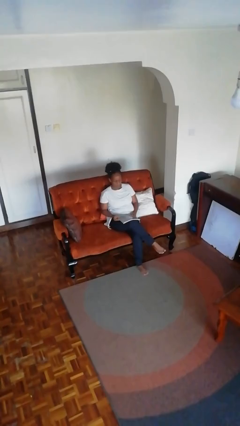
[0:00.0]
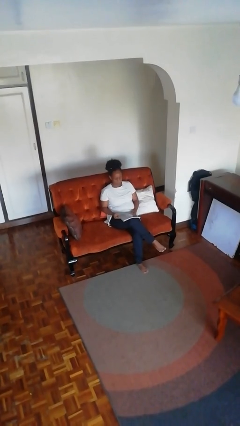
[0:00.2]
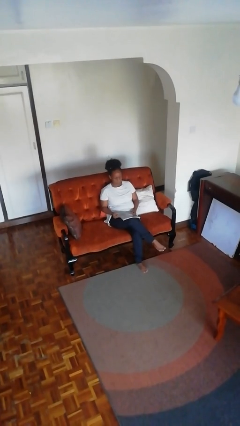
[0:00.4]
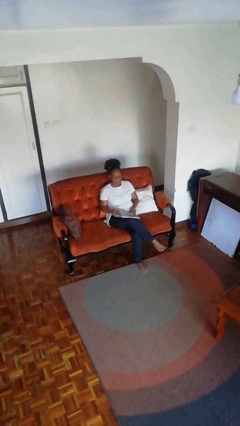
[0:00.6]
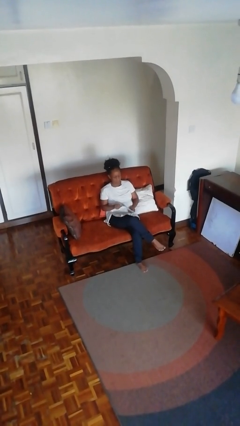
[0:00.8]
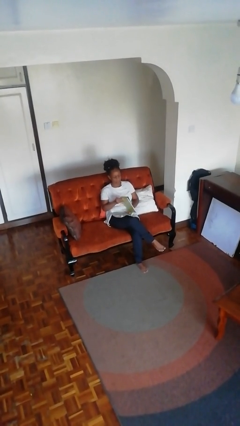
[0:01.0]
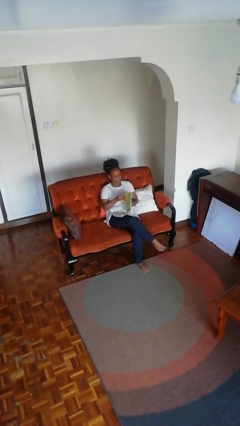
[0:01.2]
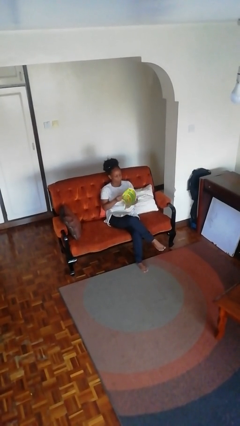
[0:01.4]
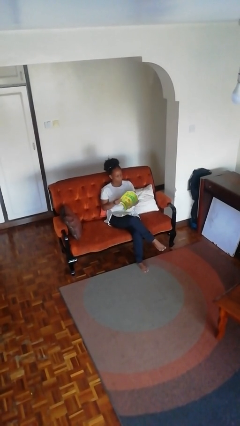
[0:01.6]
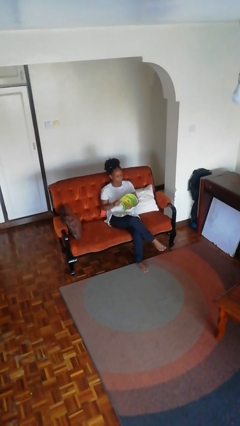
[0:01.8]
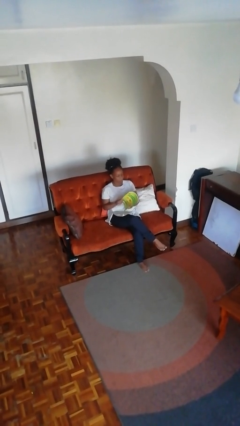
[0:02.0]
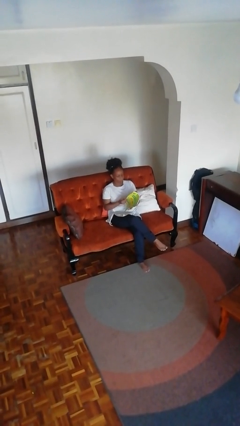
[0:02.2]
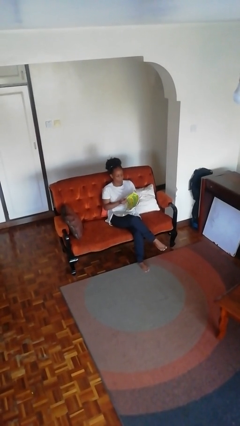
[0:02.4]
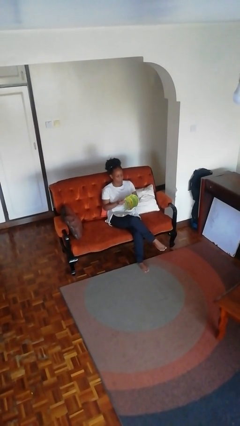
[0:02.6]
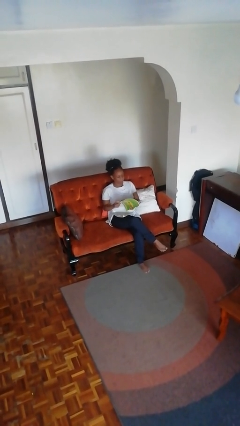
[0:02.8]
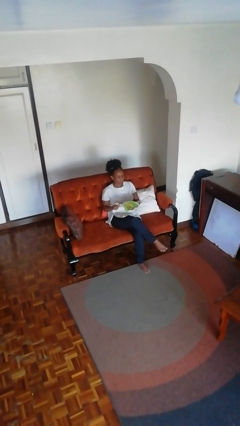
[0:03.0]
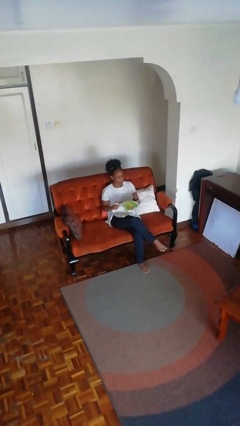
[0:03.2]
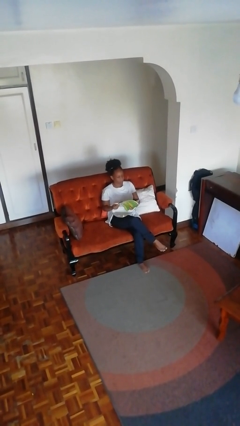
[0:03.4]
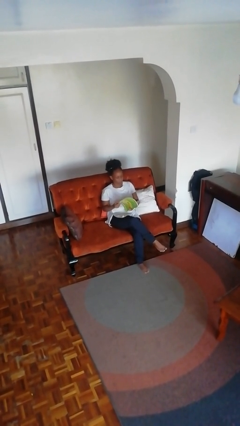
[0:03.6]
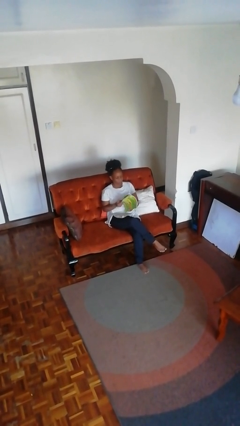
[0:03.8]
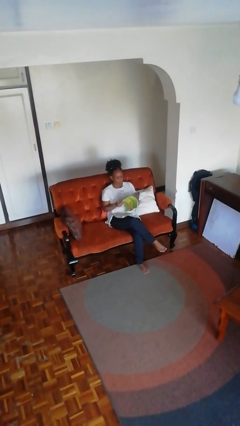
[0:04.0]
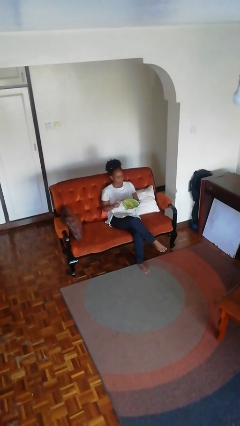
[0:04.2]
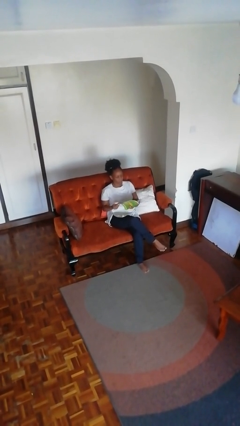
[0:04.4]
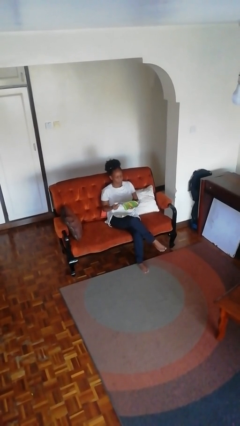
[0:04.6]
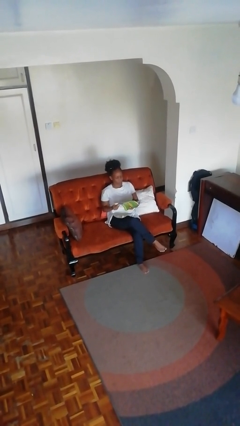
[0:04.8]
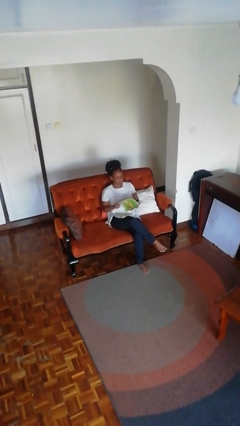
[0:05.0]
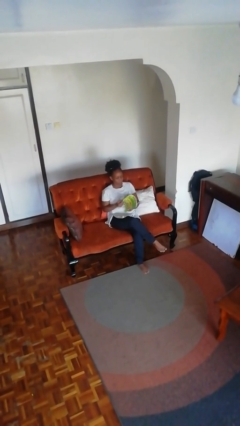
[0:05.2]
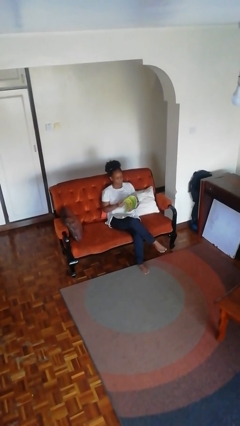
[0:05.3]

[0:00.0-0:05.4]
person reads magazine

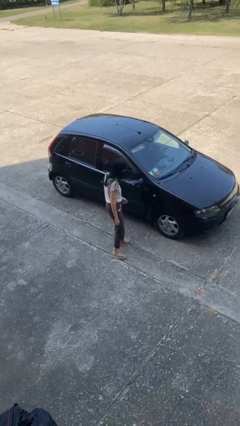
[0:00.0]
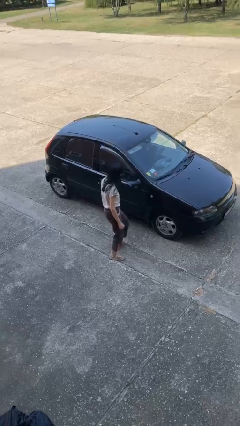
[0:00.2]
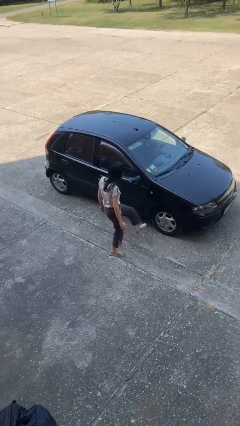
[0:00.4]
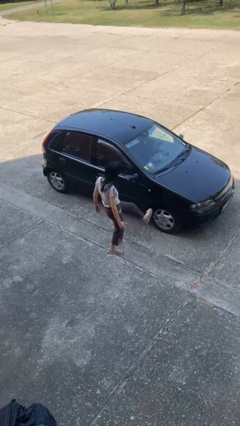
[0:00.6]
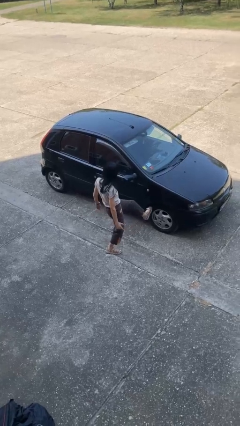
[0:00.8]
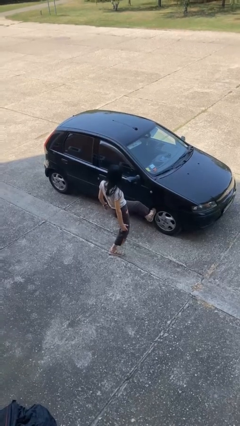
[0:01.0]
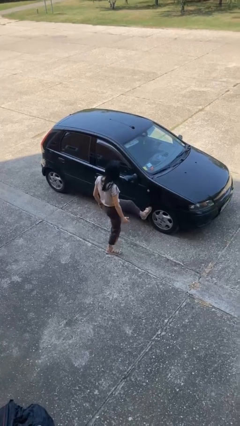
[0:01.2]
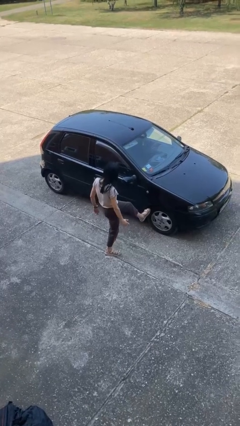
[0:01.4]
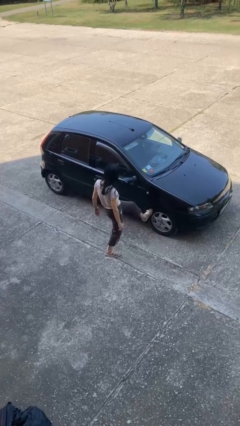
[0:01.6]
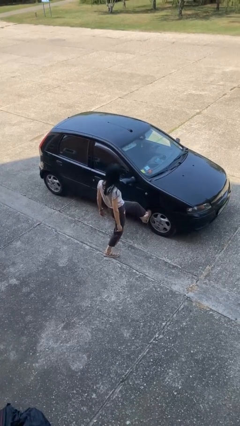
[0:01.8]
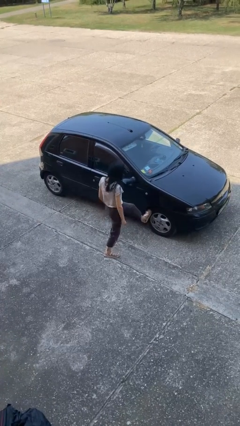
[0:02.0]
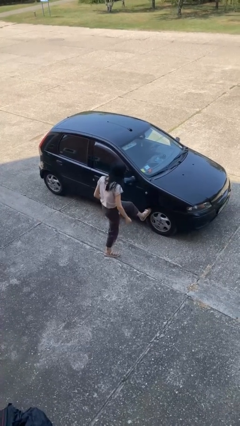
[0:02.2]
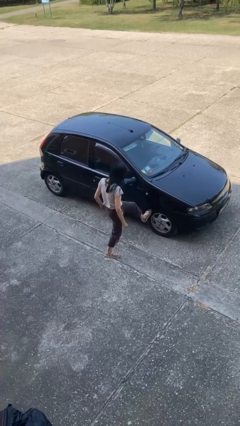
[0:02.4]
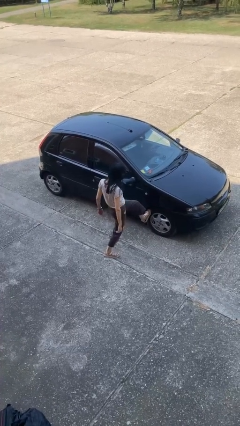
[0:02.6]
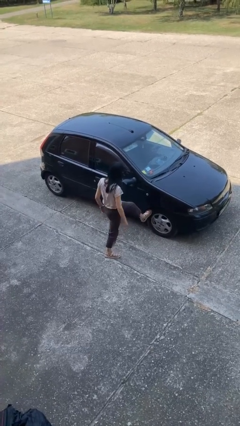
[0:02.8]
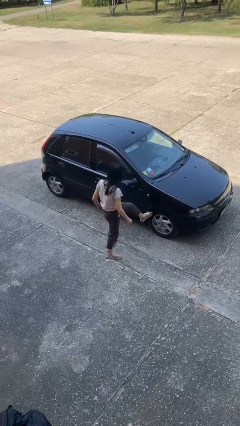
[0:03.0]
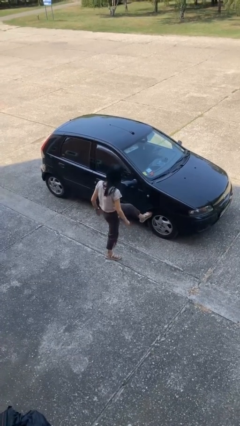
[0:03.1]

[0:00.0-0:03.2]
person kicks car tires

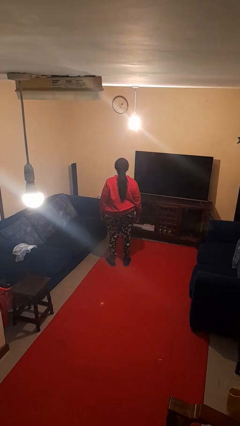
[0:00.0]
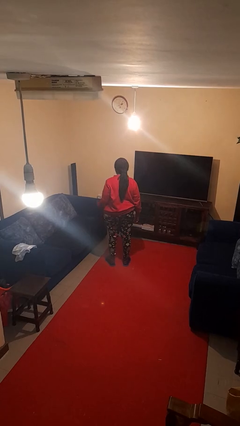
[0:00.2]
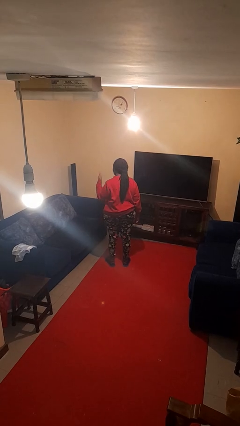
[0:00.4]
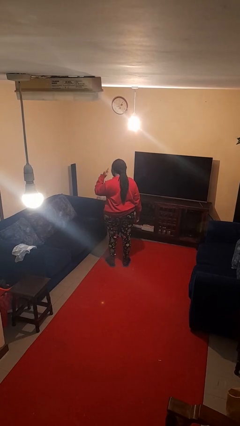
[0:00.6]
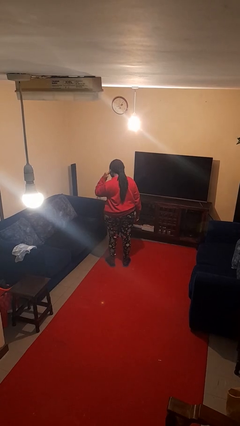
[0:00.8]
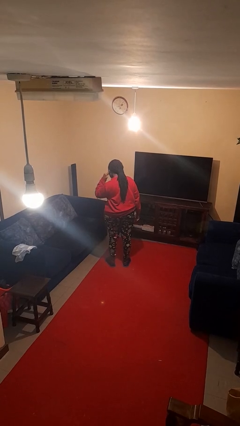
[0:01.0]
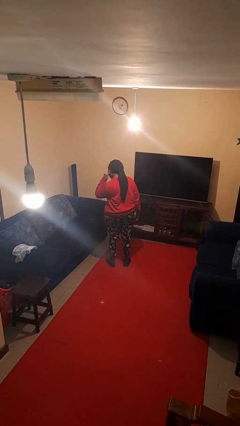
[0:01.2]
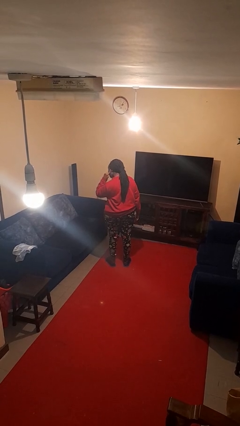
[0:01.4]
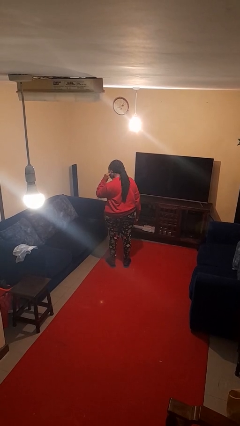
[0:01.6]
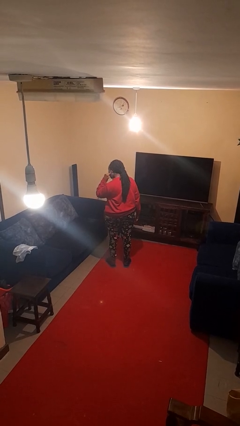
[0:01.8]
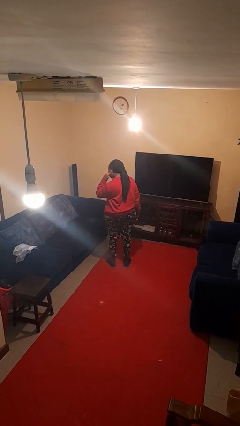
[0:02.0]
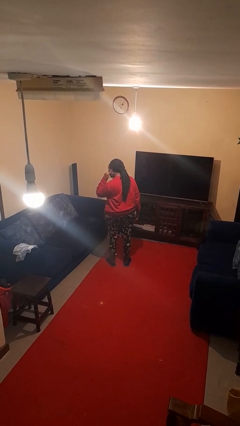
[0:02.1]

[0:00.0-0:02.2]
person gestures listen closely

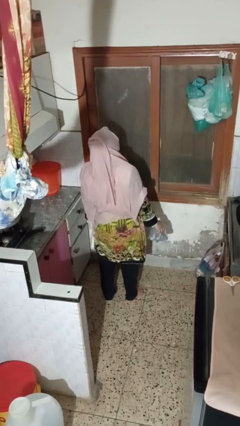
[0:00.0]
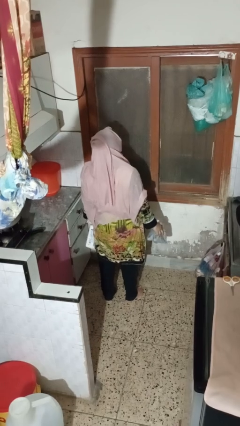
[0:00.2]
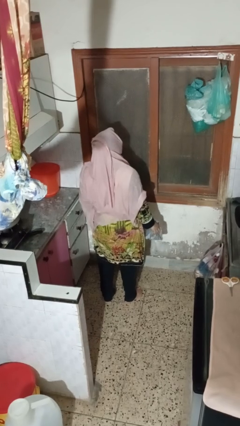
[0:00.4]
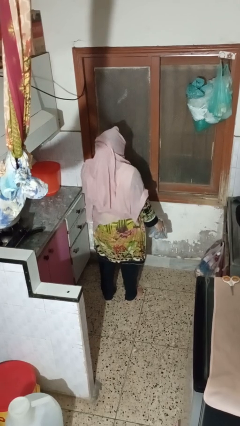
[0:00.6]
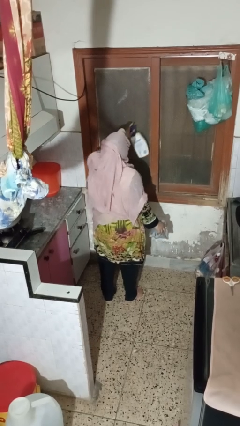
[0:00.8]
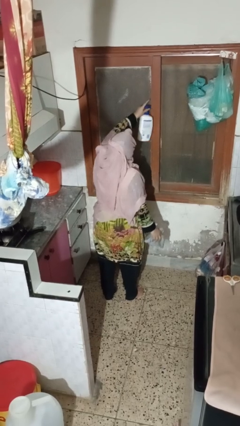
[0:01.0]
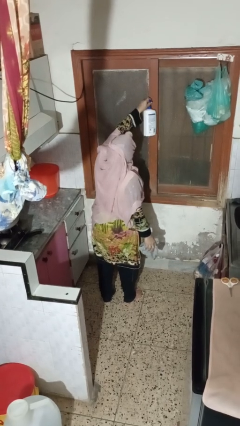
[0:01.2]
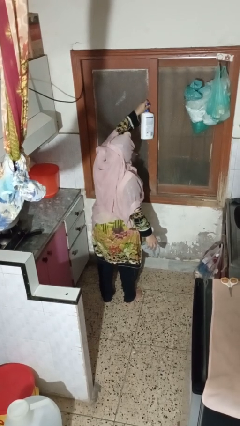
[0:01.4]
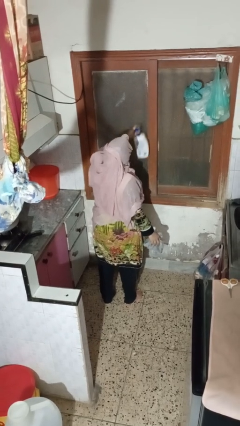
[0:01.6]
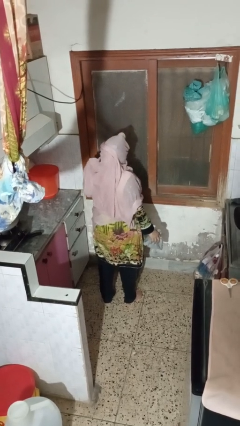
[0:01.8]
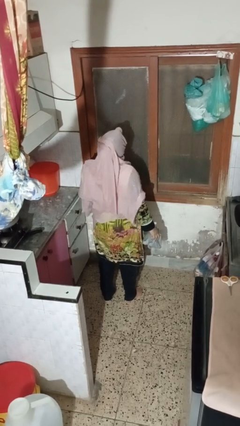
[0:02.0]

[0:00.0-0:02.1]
person sprays from bottle

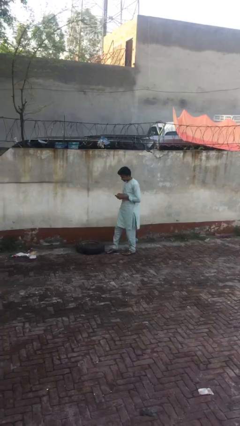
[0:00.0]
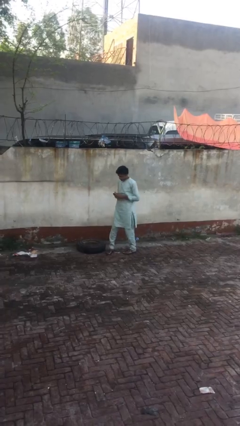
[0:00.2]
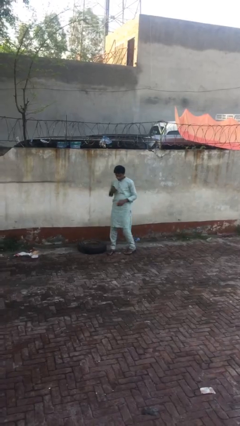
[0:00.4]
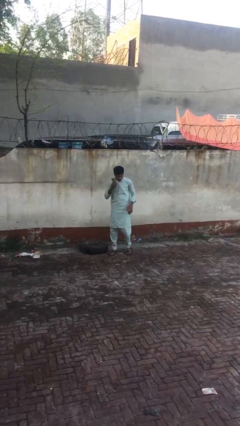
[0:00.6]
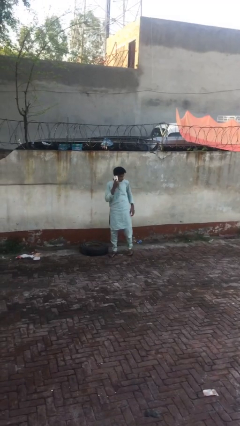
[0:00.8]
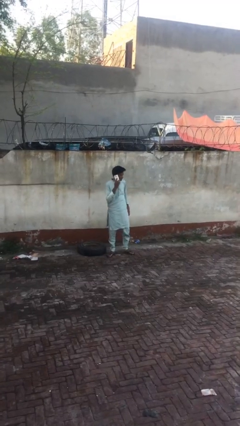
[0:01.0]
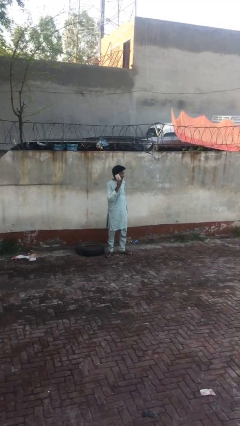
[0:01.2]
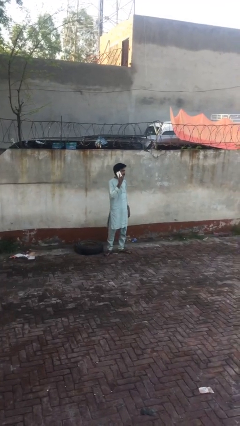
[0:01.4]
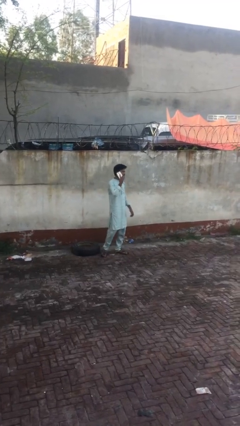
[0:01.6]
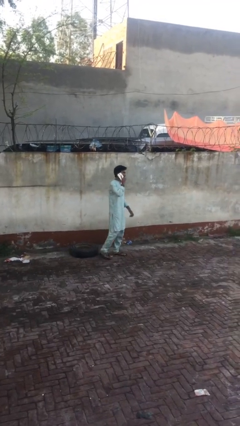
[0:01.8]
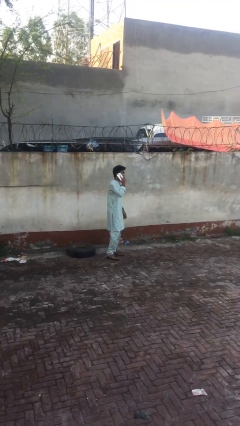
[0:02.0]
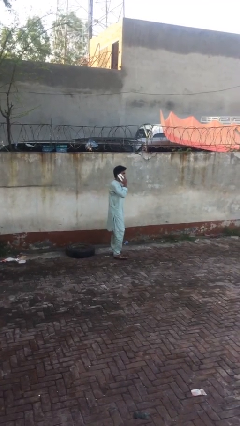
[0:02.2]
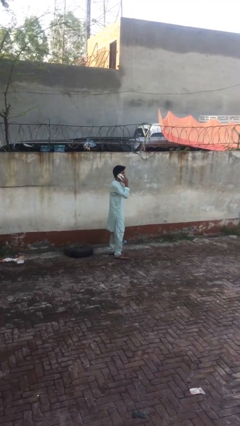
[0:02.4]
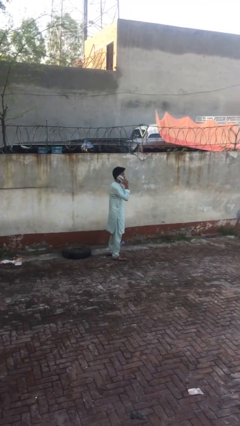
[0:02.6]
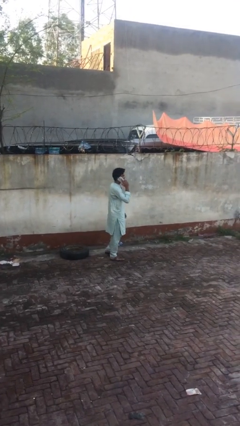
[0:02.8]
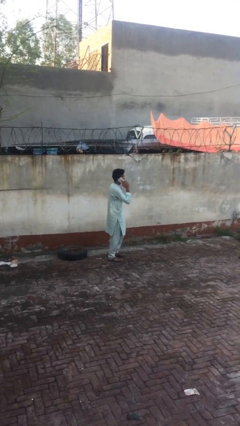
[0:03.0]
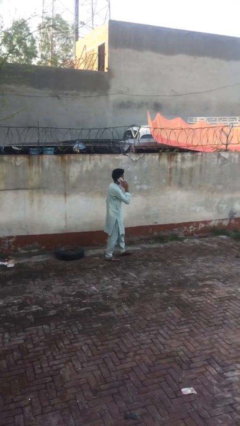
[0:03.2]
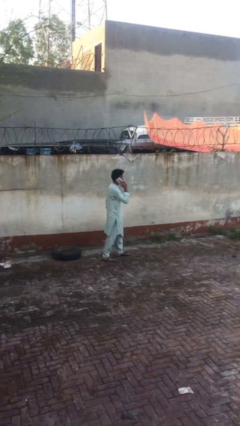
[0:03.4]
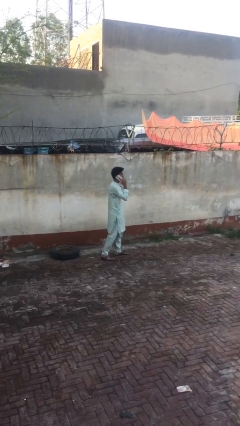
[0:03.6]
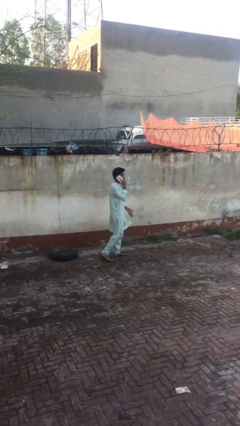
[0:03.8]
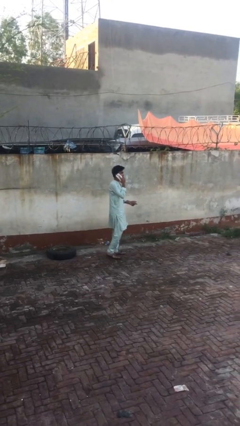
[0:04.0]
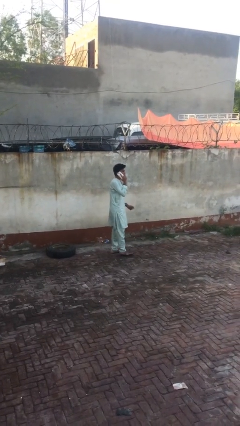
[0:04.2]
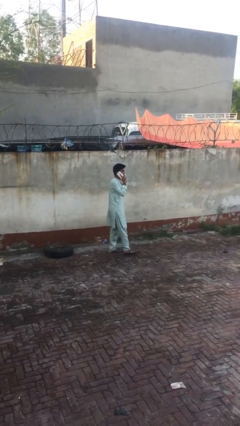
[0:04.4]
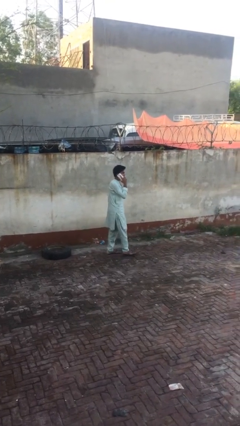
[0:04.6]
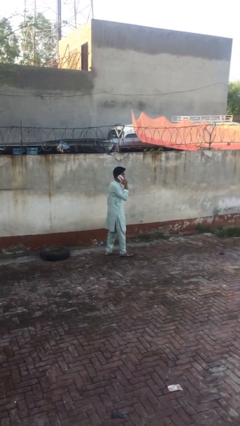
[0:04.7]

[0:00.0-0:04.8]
person talks on phone

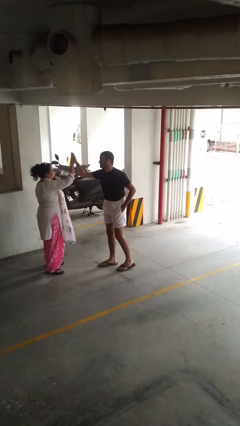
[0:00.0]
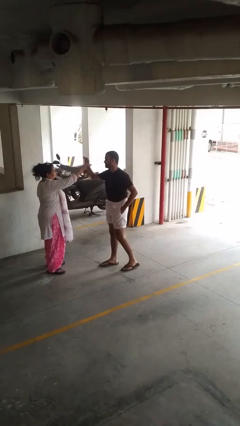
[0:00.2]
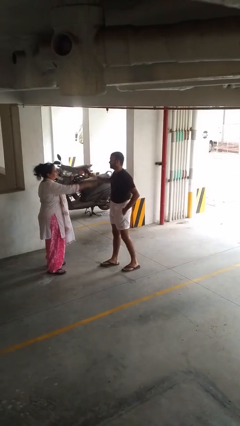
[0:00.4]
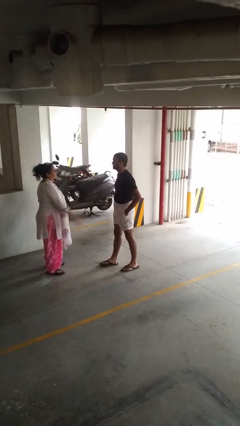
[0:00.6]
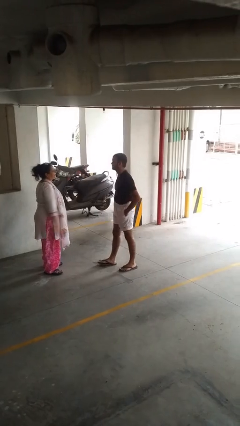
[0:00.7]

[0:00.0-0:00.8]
person highfives hand
